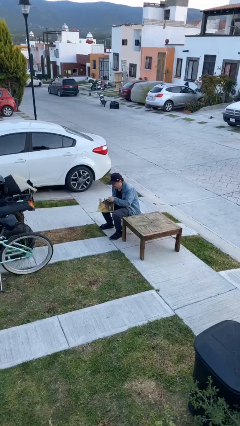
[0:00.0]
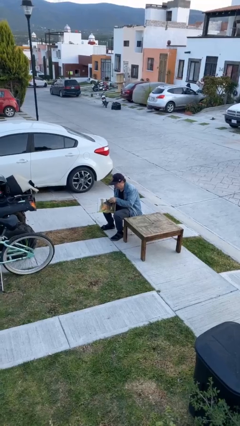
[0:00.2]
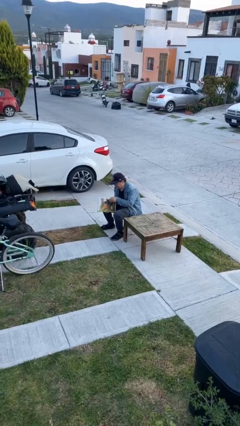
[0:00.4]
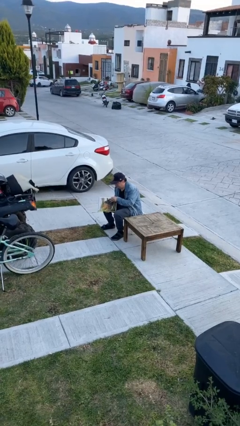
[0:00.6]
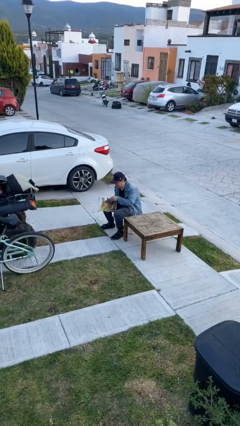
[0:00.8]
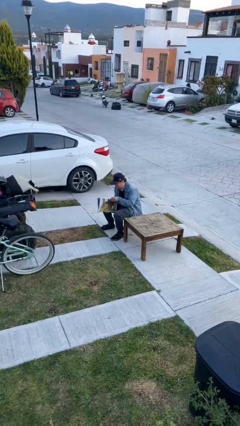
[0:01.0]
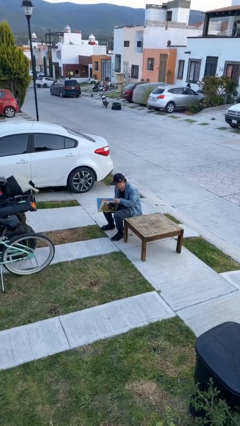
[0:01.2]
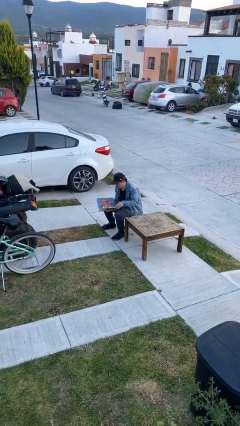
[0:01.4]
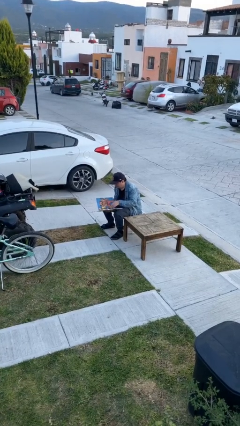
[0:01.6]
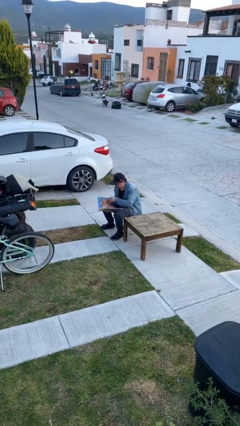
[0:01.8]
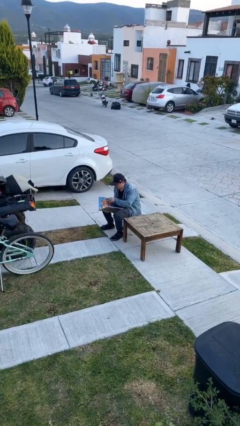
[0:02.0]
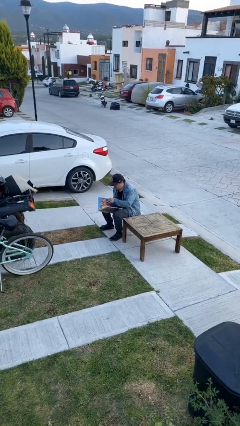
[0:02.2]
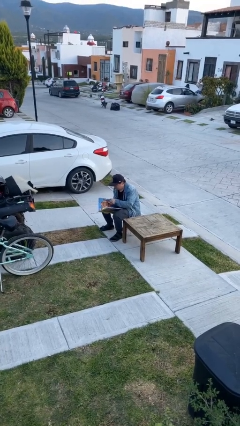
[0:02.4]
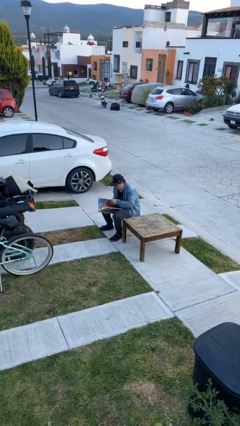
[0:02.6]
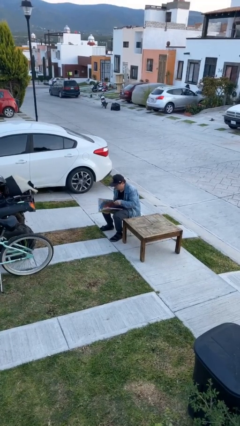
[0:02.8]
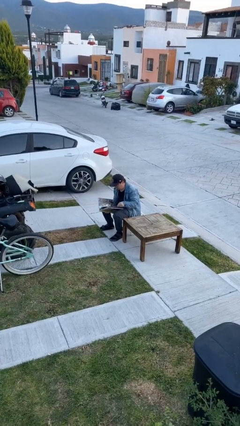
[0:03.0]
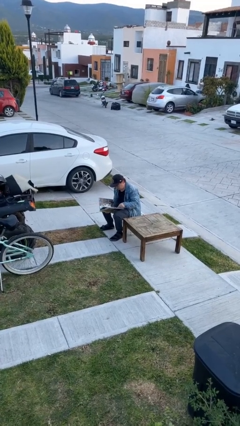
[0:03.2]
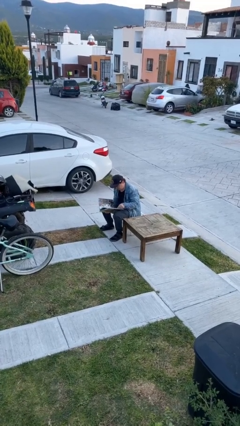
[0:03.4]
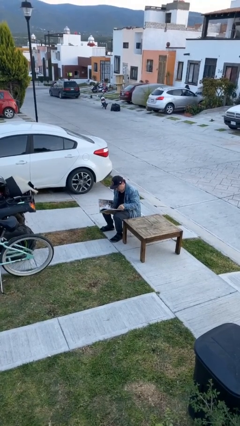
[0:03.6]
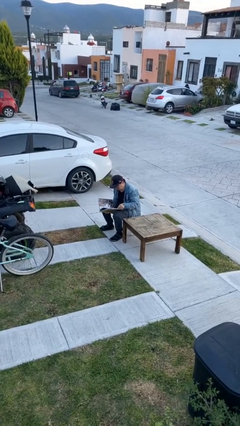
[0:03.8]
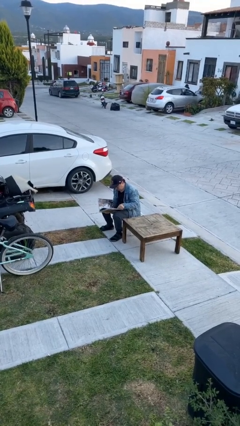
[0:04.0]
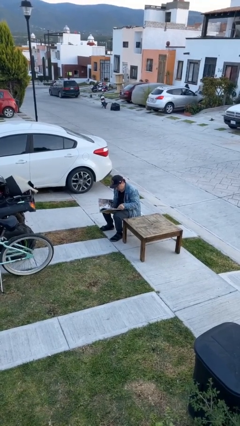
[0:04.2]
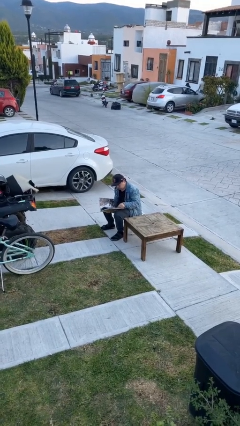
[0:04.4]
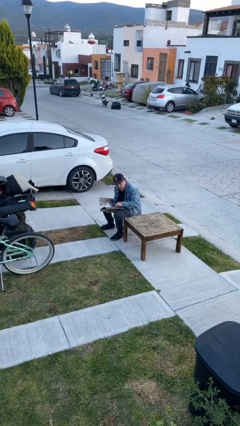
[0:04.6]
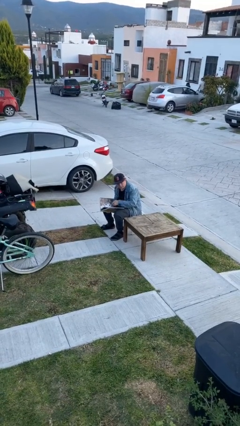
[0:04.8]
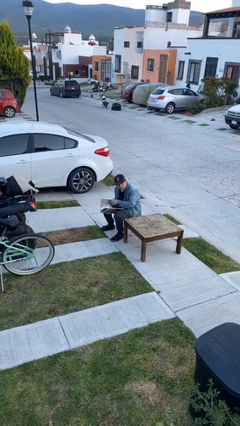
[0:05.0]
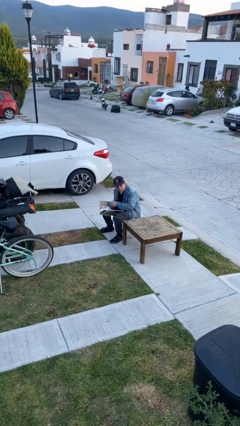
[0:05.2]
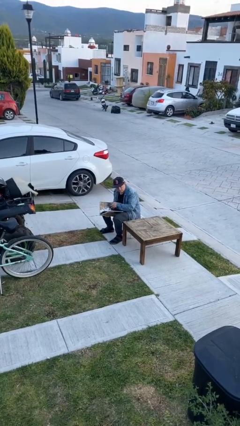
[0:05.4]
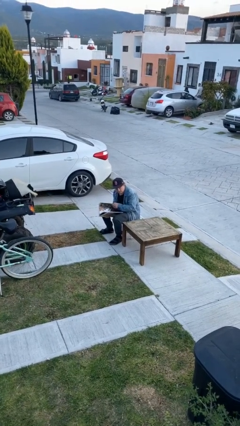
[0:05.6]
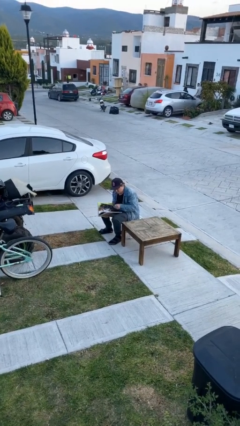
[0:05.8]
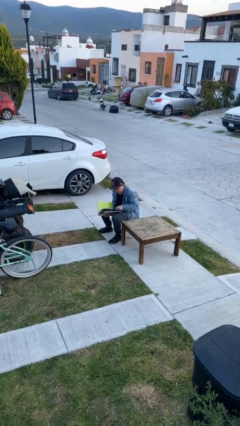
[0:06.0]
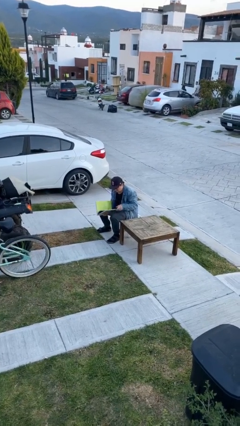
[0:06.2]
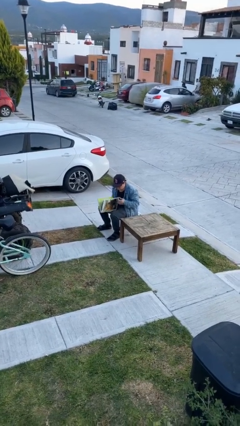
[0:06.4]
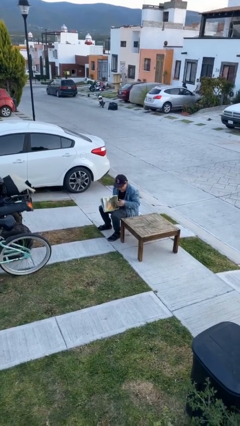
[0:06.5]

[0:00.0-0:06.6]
person reads document

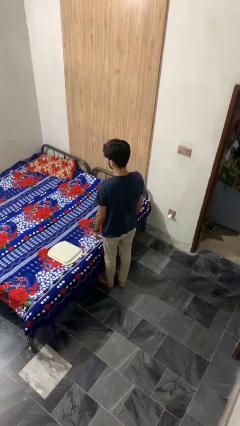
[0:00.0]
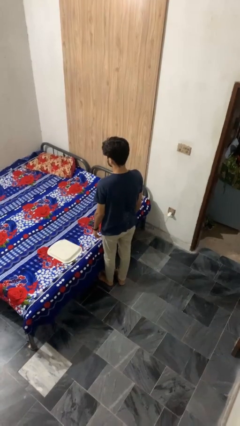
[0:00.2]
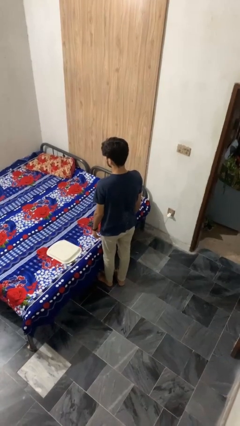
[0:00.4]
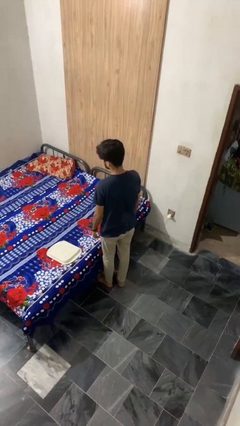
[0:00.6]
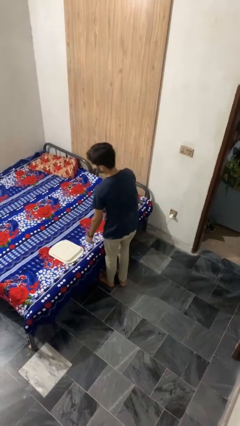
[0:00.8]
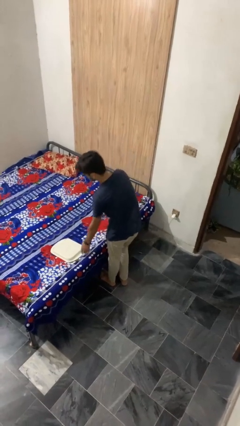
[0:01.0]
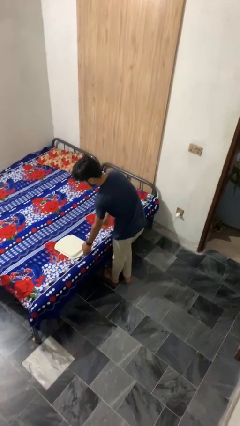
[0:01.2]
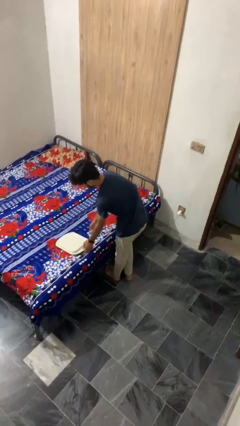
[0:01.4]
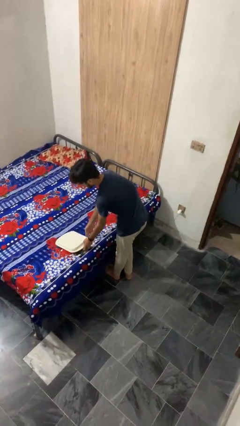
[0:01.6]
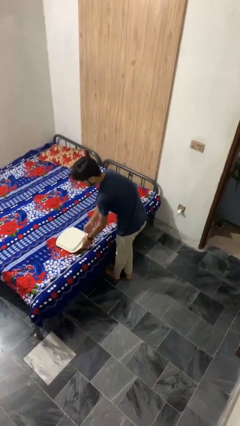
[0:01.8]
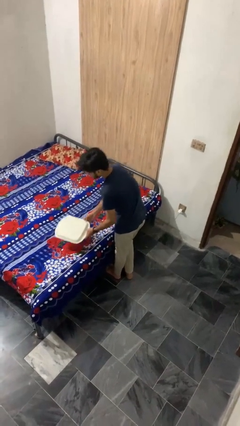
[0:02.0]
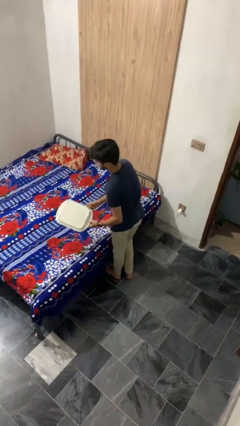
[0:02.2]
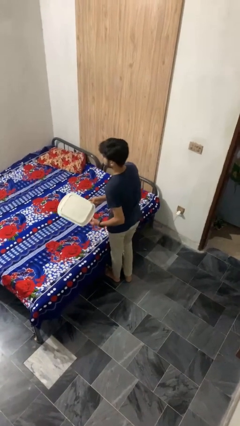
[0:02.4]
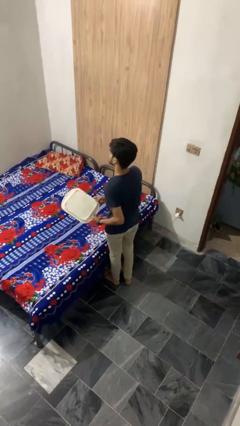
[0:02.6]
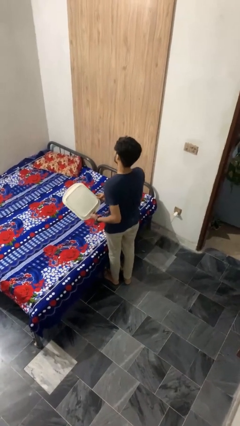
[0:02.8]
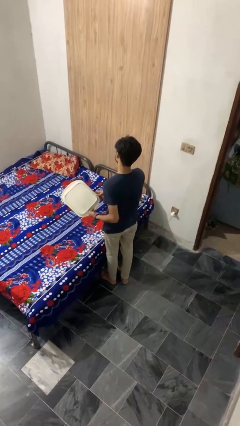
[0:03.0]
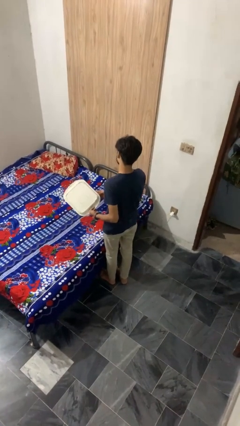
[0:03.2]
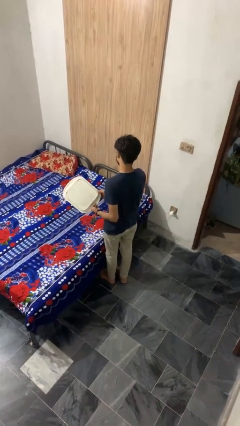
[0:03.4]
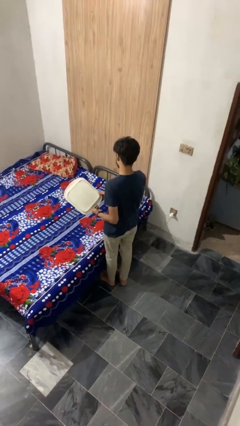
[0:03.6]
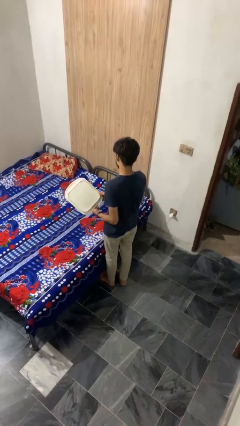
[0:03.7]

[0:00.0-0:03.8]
person picks up object from bed

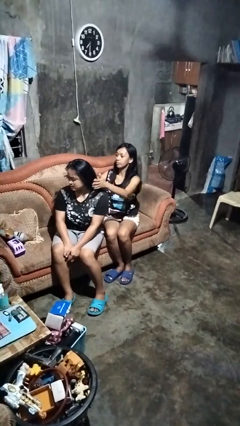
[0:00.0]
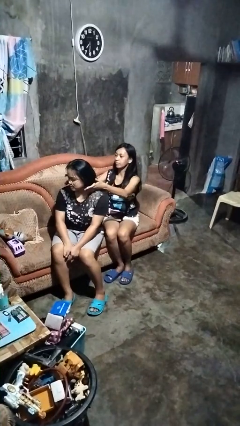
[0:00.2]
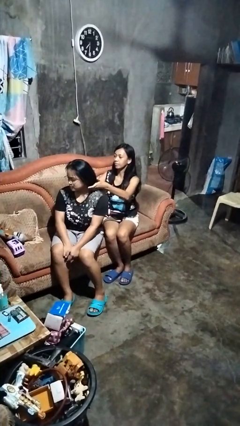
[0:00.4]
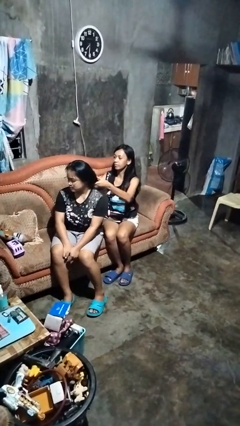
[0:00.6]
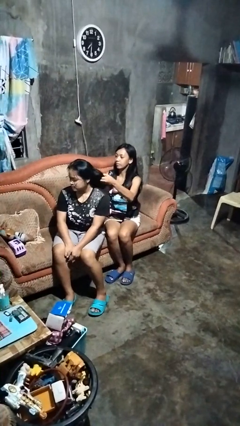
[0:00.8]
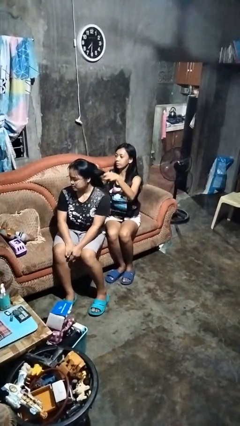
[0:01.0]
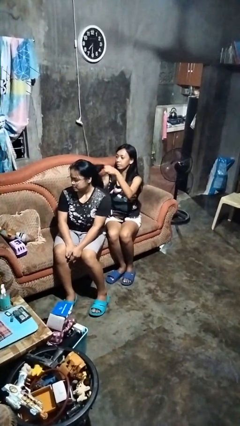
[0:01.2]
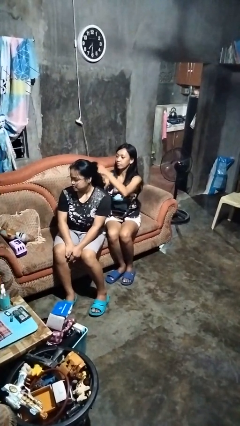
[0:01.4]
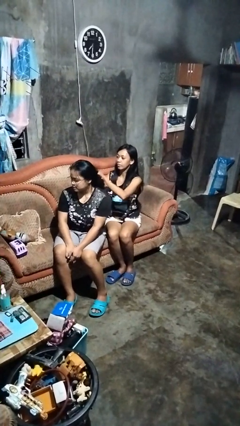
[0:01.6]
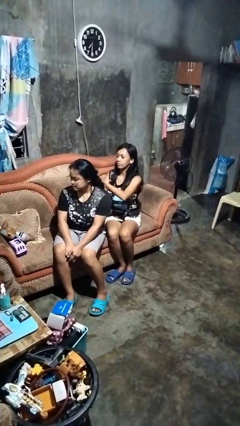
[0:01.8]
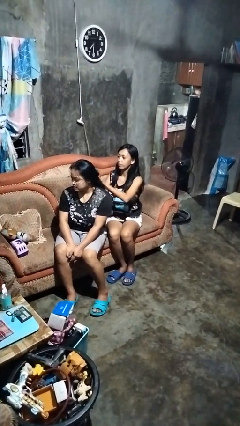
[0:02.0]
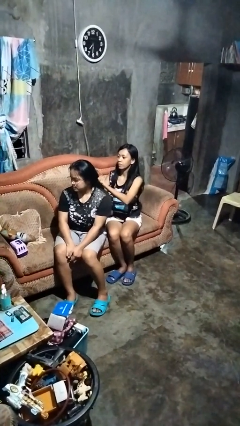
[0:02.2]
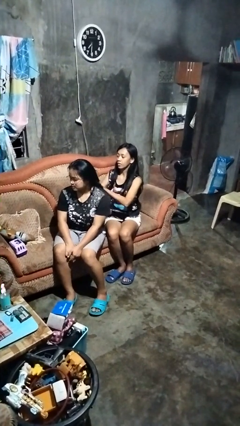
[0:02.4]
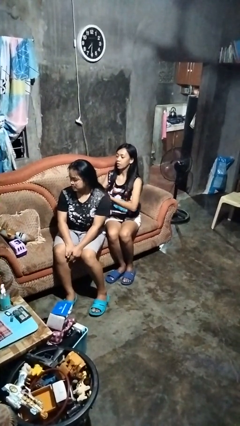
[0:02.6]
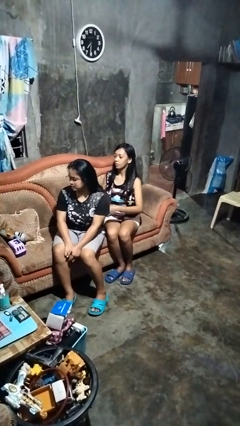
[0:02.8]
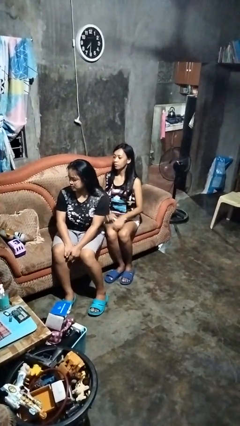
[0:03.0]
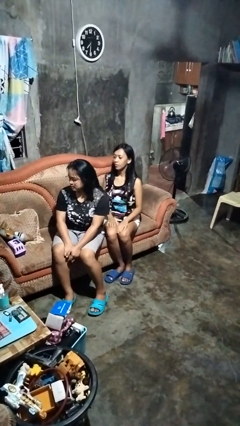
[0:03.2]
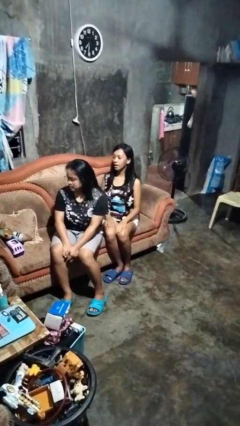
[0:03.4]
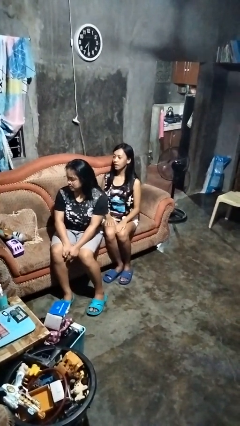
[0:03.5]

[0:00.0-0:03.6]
person braids hair of person

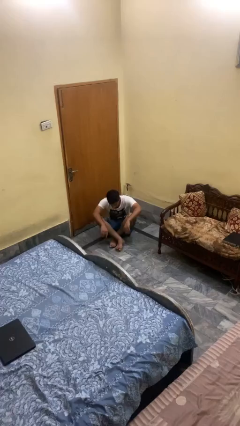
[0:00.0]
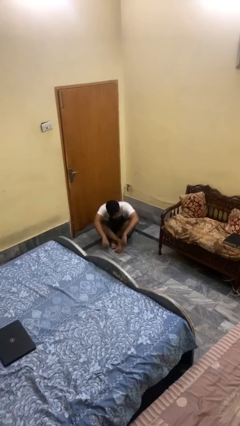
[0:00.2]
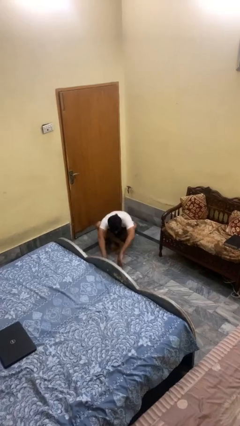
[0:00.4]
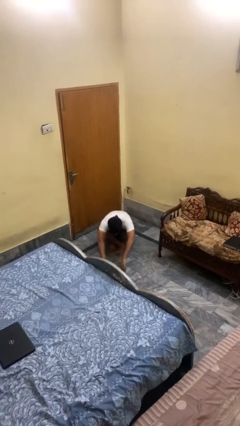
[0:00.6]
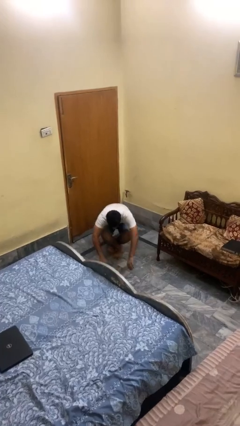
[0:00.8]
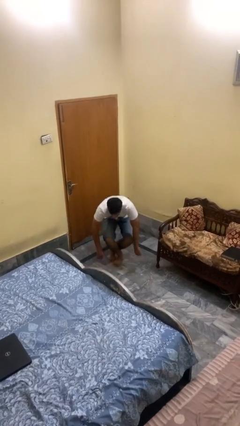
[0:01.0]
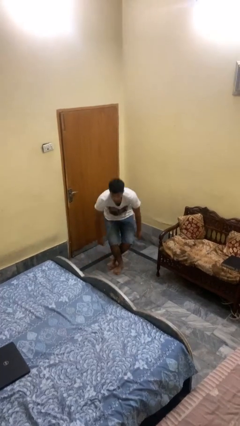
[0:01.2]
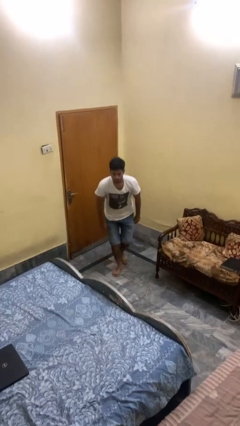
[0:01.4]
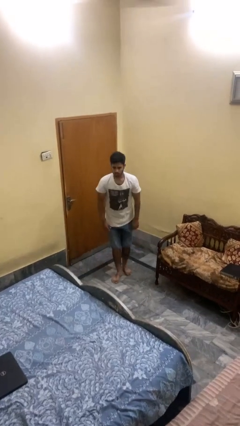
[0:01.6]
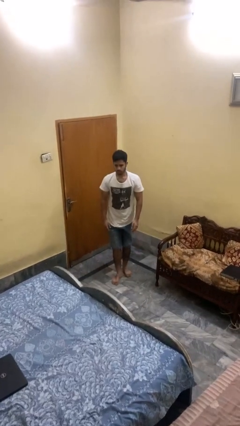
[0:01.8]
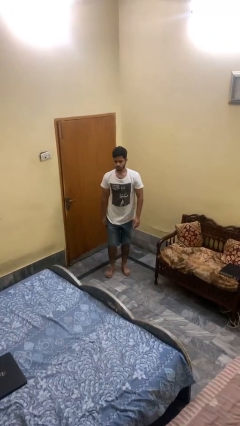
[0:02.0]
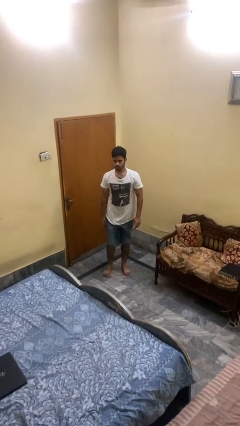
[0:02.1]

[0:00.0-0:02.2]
person stands up from floor

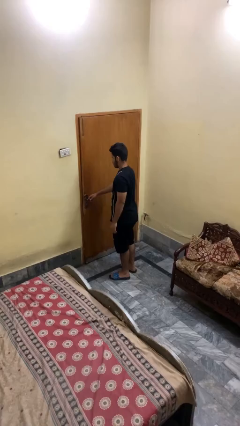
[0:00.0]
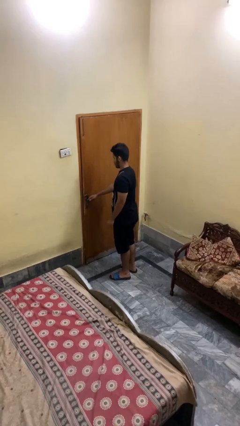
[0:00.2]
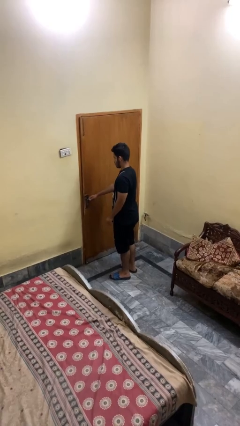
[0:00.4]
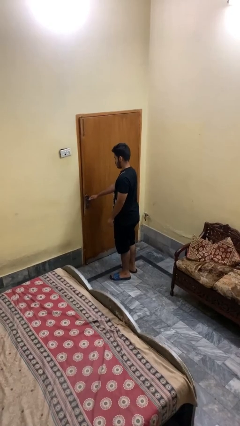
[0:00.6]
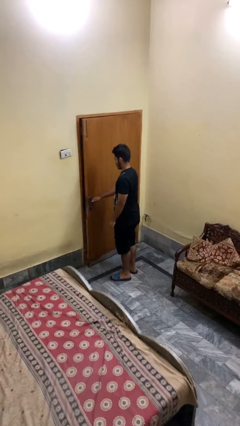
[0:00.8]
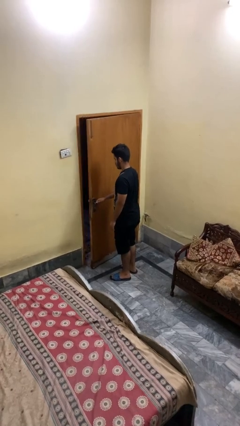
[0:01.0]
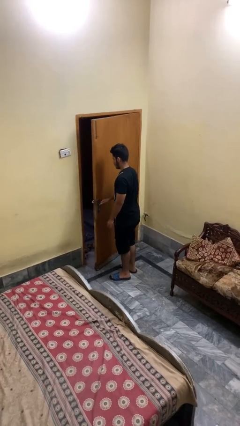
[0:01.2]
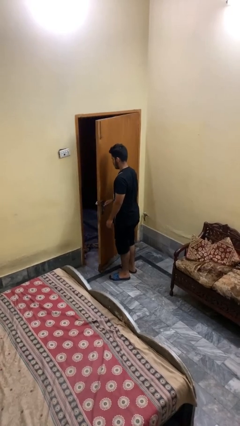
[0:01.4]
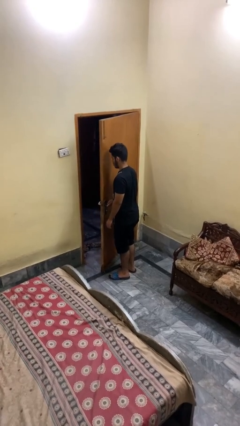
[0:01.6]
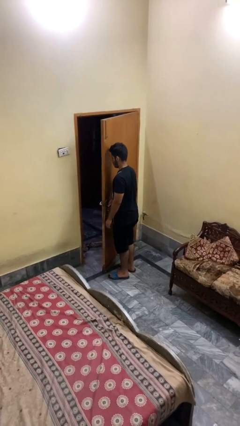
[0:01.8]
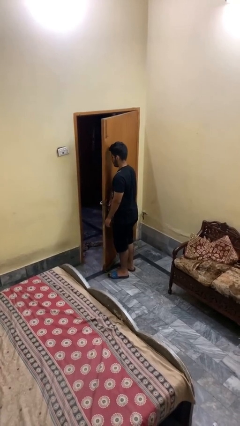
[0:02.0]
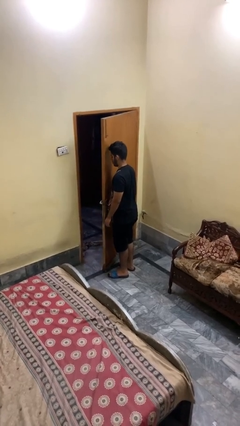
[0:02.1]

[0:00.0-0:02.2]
person opens facility door
